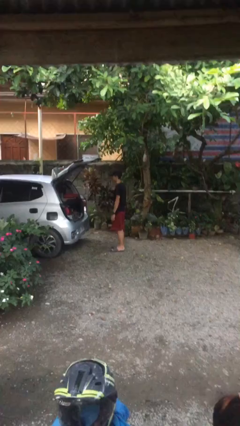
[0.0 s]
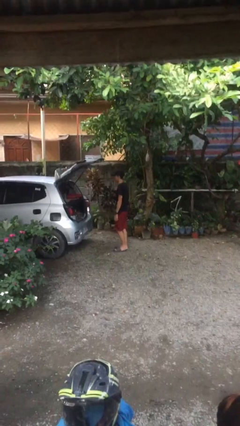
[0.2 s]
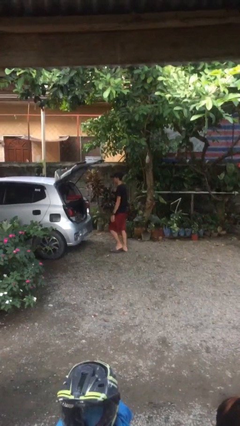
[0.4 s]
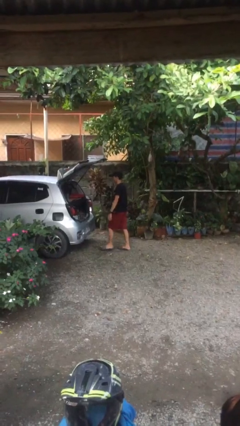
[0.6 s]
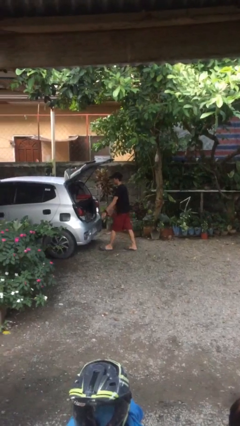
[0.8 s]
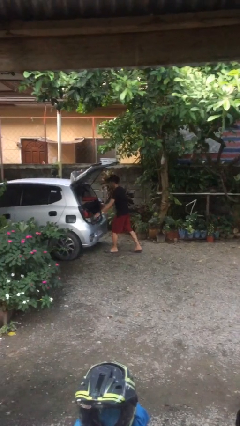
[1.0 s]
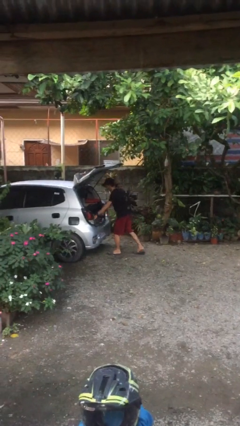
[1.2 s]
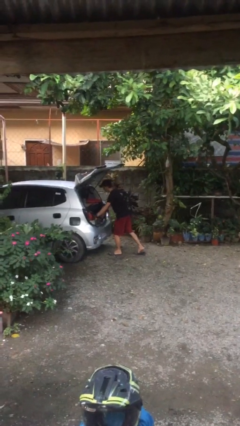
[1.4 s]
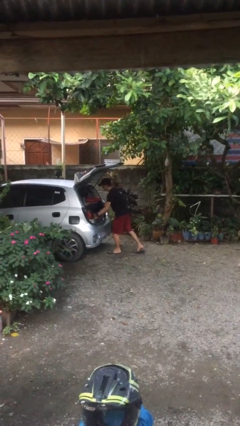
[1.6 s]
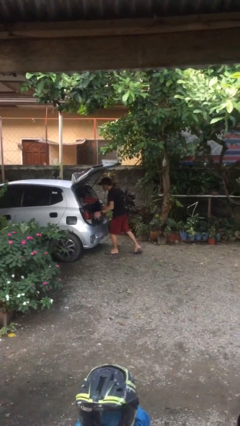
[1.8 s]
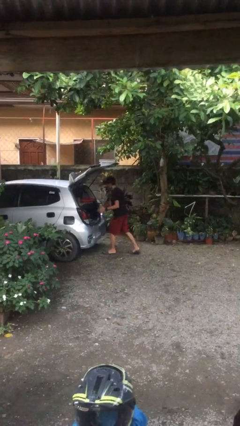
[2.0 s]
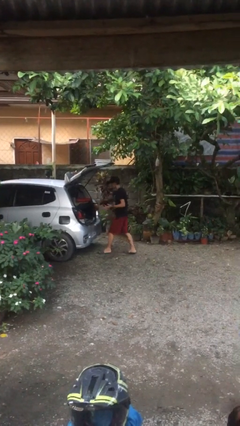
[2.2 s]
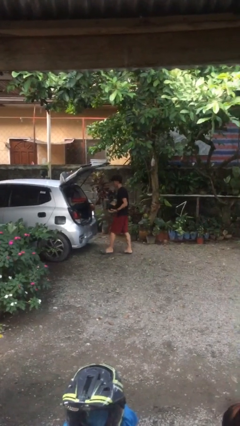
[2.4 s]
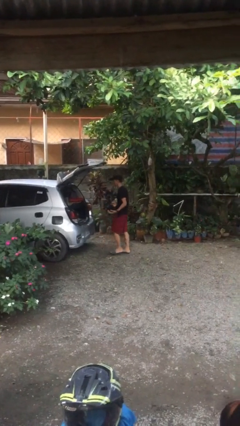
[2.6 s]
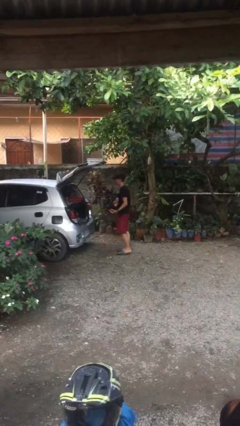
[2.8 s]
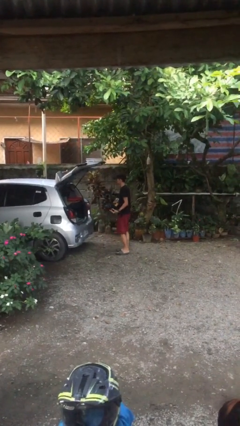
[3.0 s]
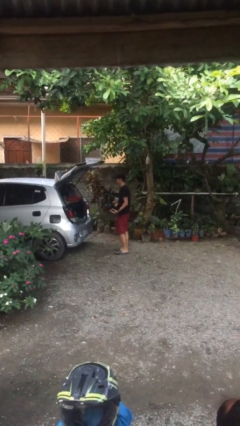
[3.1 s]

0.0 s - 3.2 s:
person unloads car

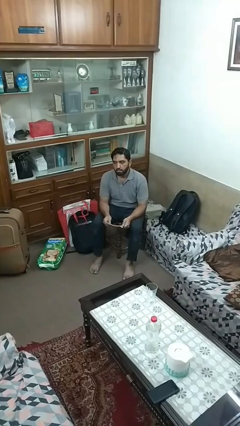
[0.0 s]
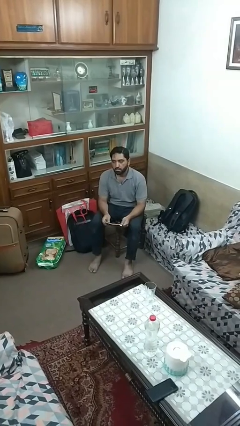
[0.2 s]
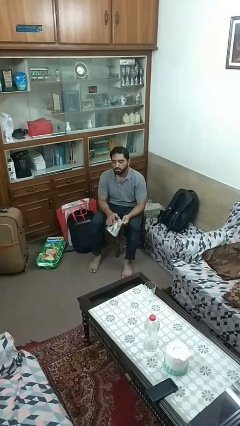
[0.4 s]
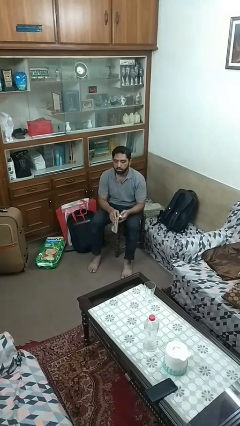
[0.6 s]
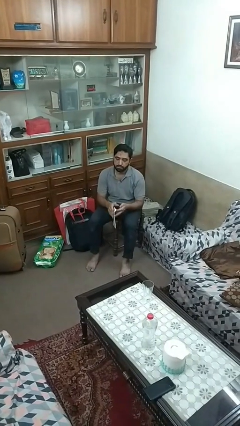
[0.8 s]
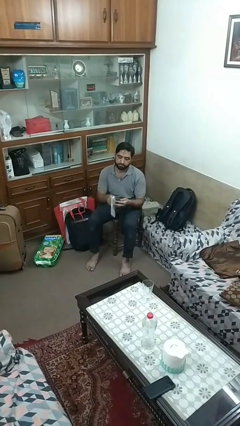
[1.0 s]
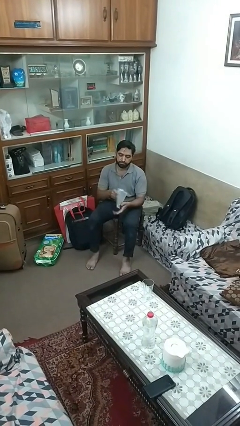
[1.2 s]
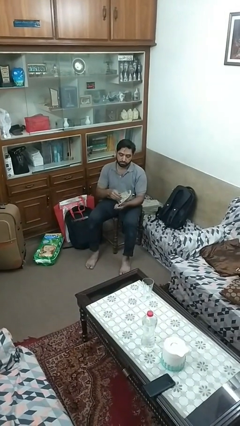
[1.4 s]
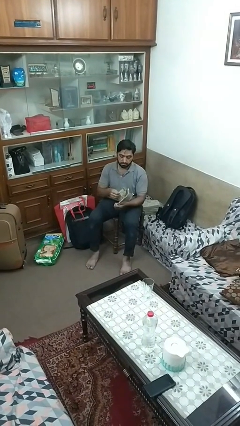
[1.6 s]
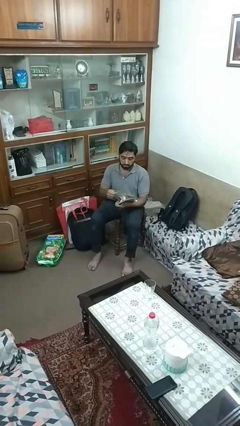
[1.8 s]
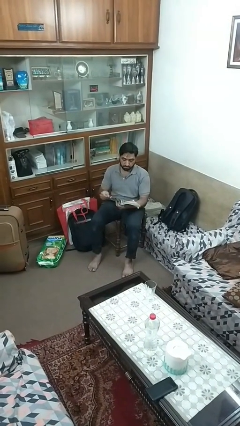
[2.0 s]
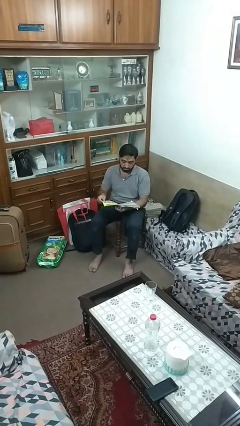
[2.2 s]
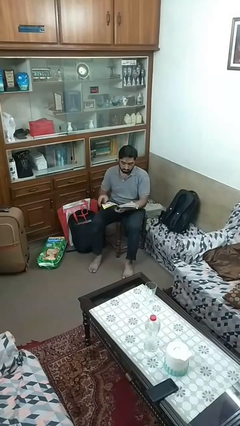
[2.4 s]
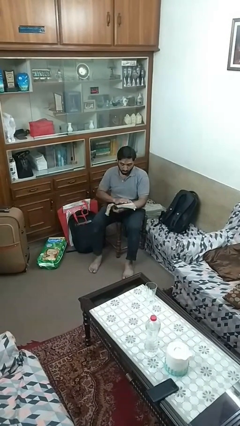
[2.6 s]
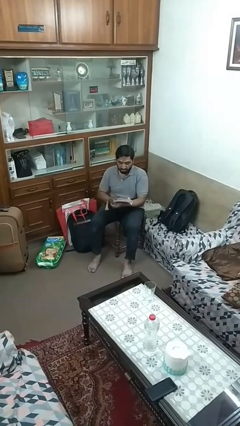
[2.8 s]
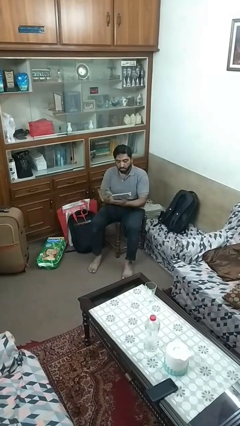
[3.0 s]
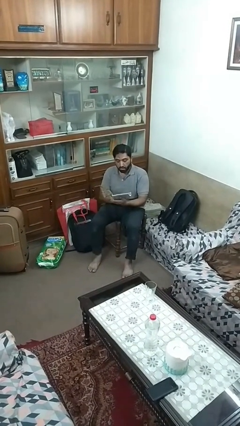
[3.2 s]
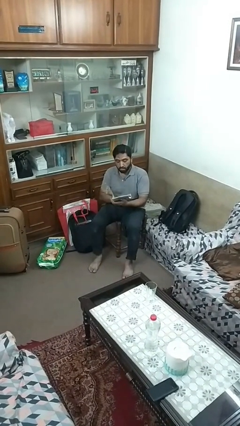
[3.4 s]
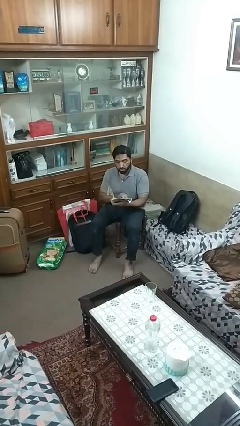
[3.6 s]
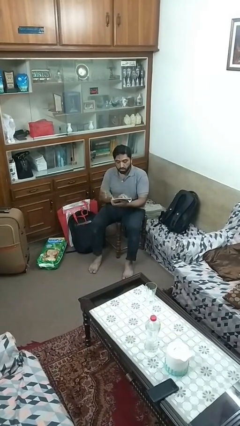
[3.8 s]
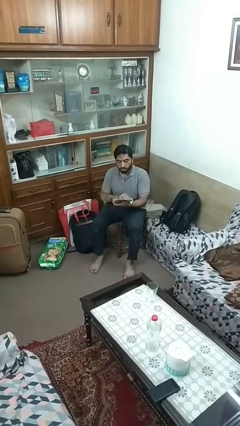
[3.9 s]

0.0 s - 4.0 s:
person reads magazine

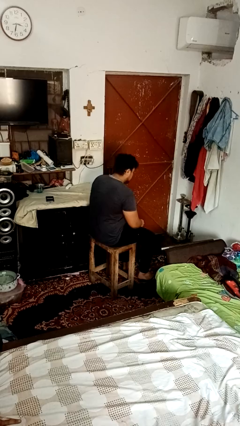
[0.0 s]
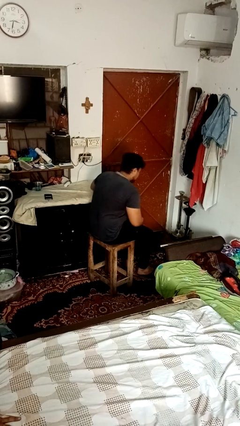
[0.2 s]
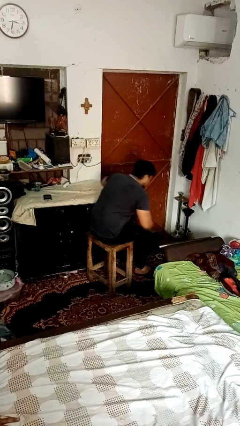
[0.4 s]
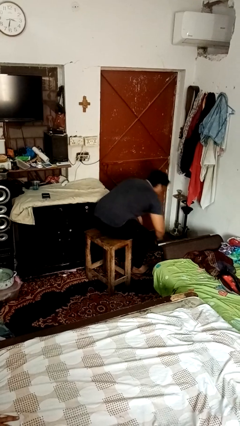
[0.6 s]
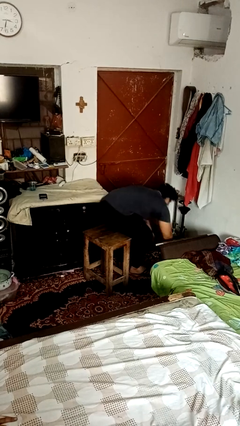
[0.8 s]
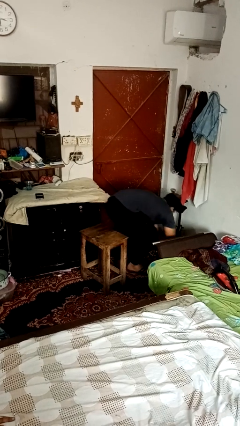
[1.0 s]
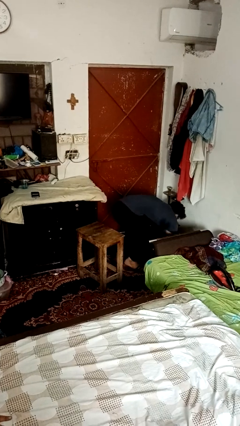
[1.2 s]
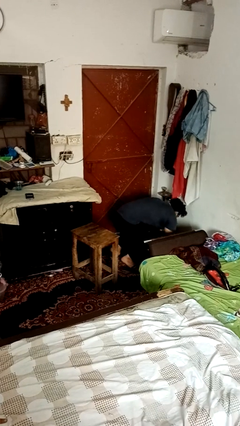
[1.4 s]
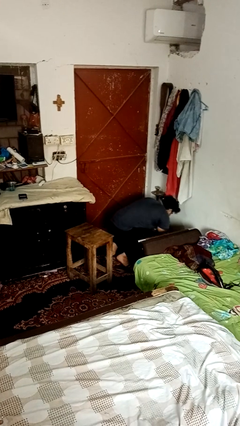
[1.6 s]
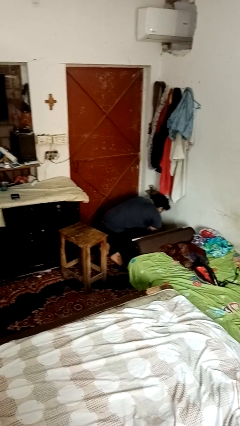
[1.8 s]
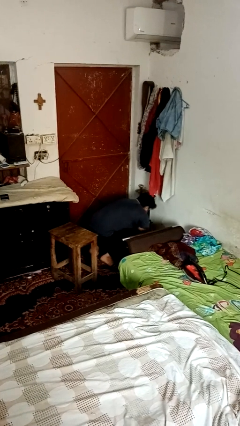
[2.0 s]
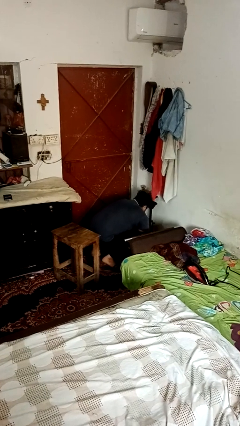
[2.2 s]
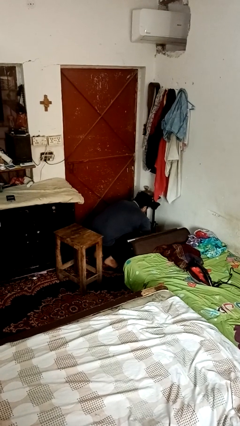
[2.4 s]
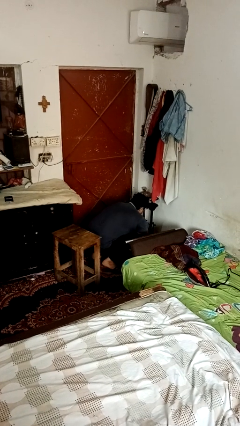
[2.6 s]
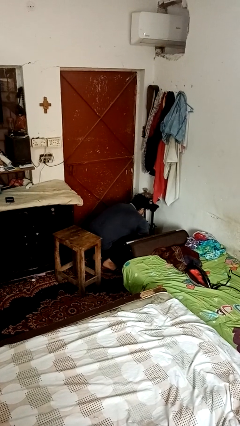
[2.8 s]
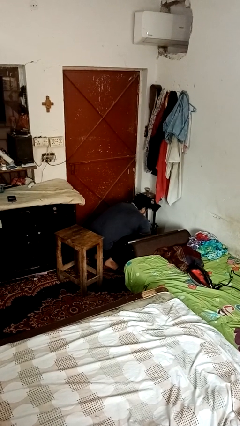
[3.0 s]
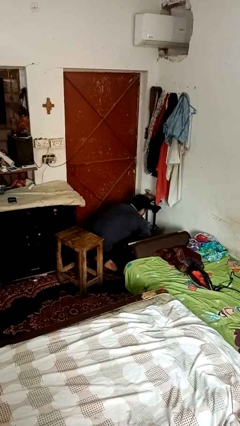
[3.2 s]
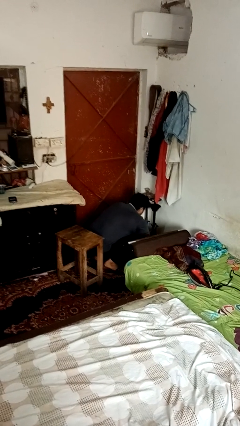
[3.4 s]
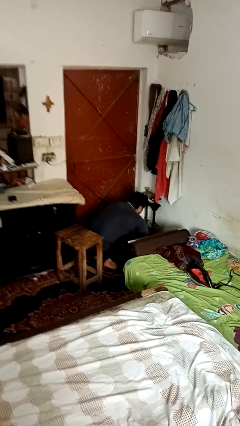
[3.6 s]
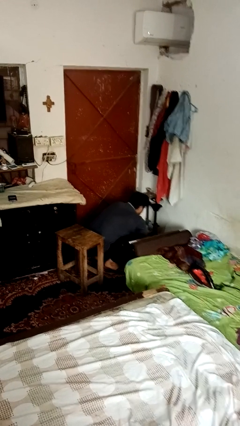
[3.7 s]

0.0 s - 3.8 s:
person falls from chair

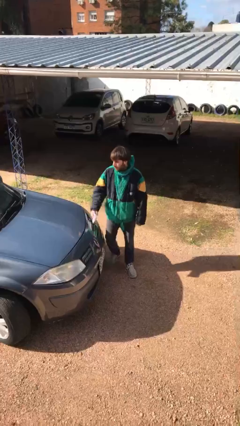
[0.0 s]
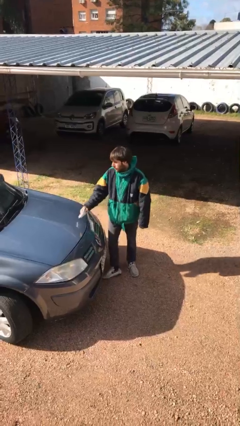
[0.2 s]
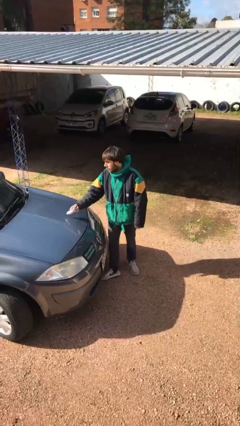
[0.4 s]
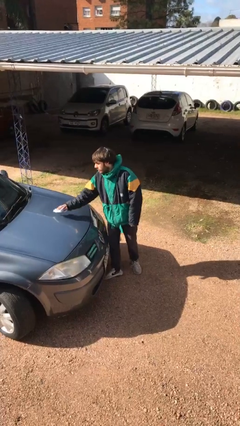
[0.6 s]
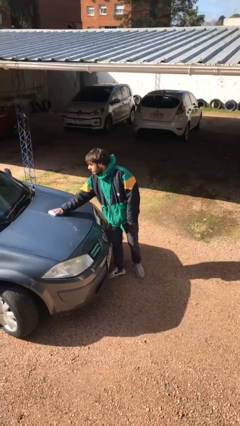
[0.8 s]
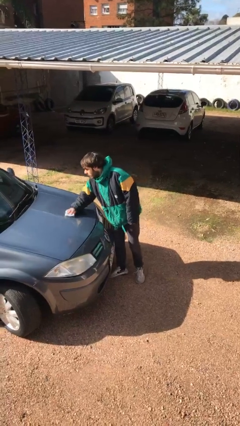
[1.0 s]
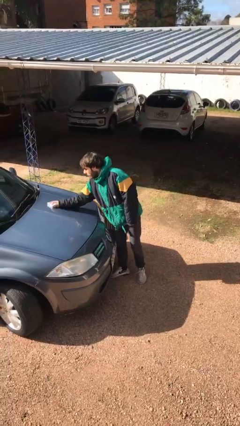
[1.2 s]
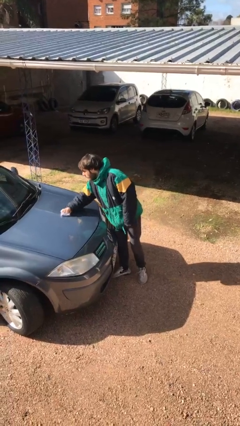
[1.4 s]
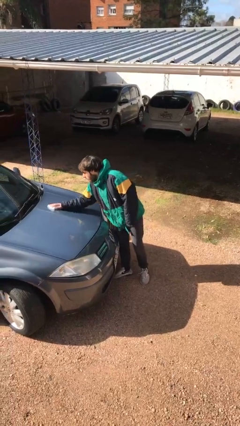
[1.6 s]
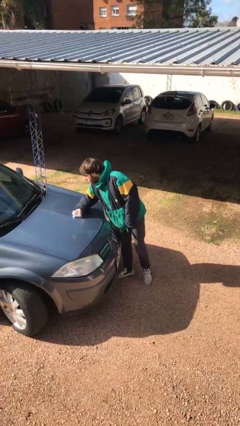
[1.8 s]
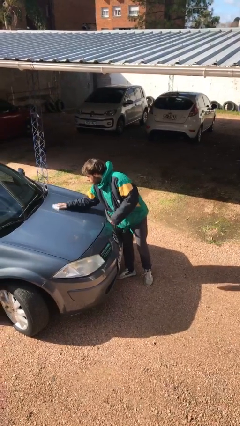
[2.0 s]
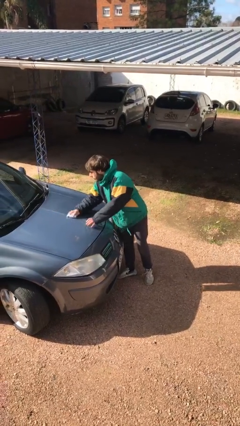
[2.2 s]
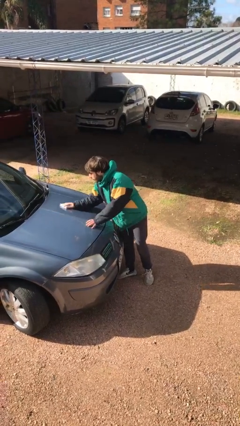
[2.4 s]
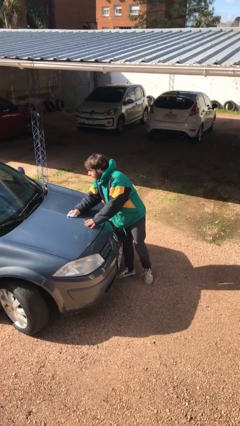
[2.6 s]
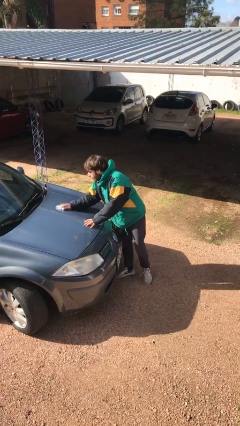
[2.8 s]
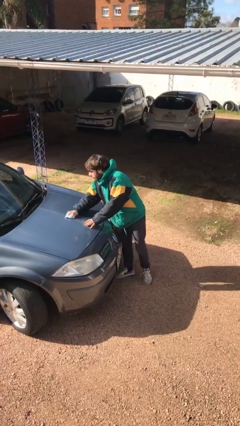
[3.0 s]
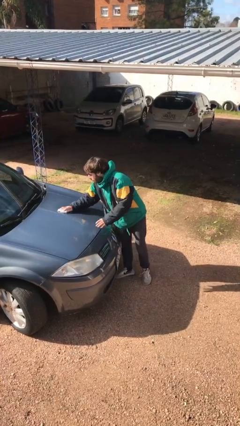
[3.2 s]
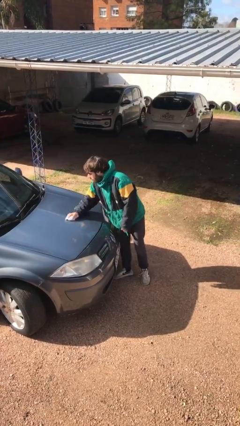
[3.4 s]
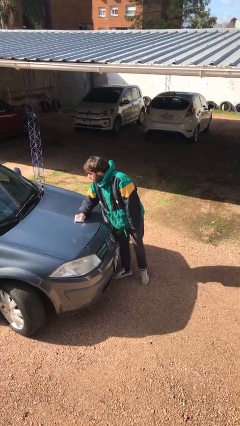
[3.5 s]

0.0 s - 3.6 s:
person polishes car with rag

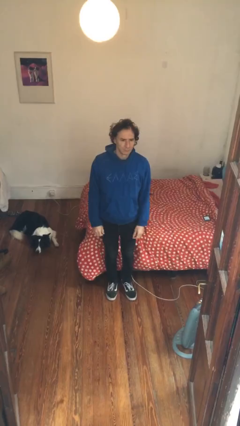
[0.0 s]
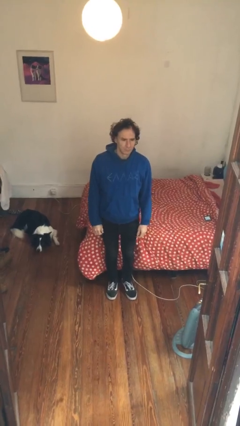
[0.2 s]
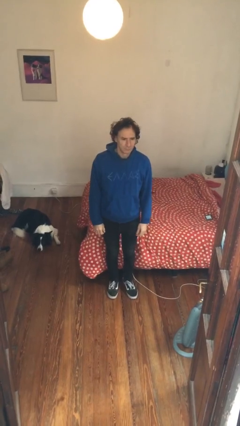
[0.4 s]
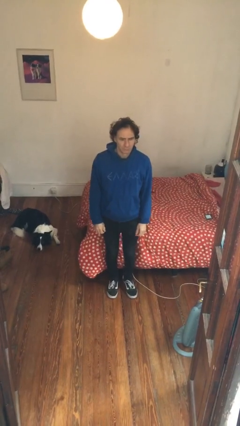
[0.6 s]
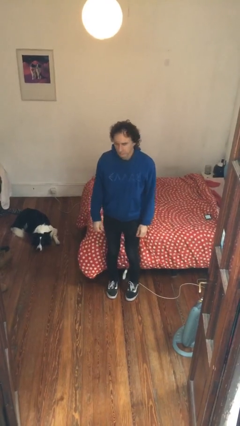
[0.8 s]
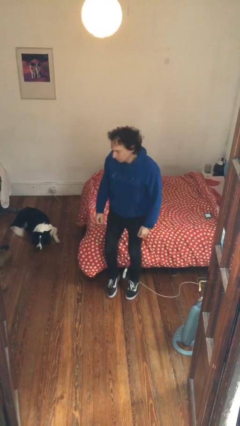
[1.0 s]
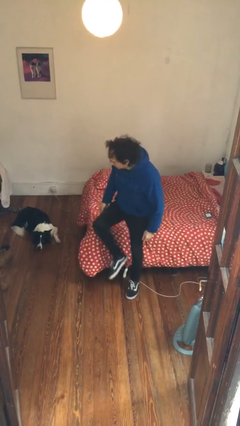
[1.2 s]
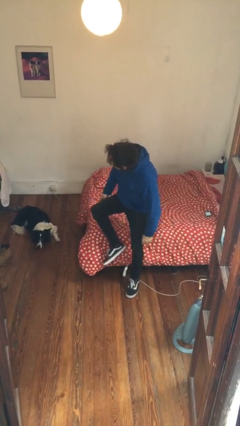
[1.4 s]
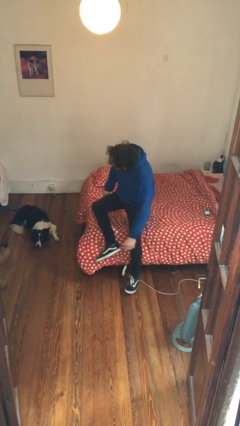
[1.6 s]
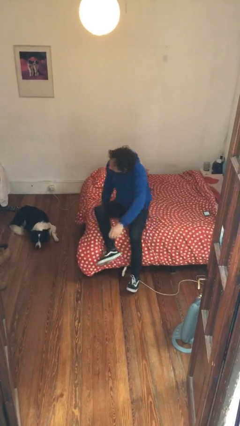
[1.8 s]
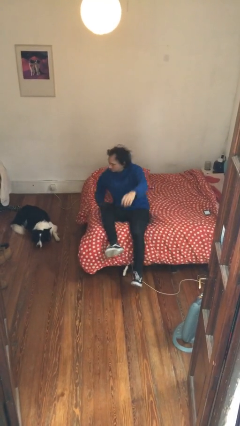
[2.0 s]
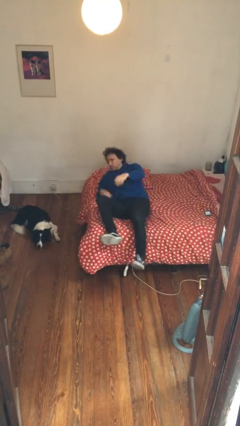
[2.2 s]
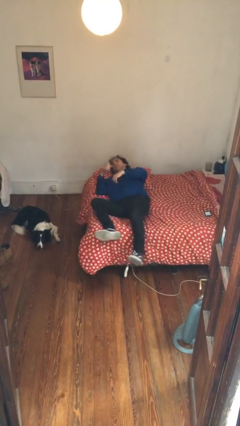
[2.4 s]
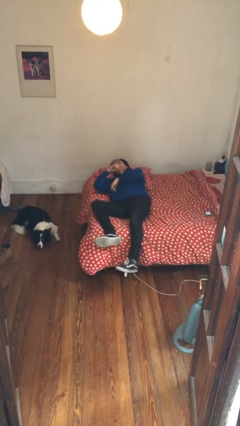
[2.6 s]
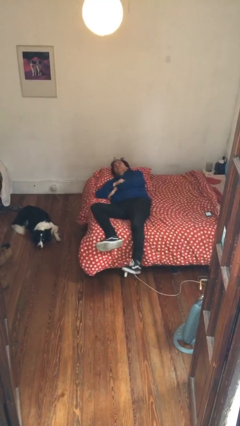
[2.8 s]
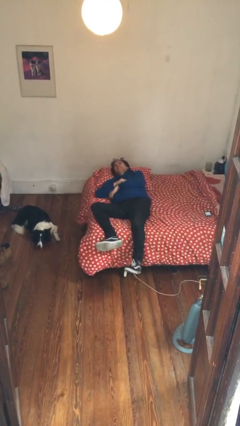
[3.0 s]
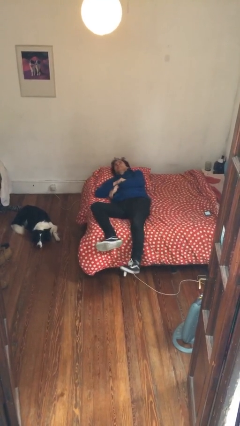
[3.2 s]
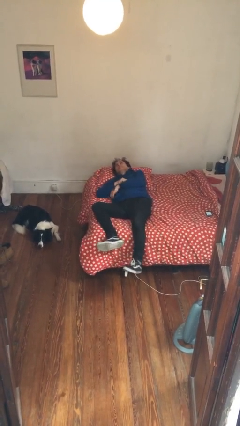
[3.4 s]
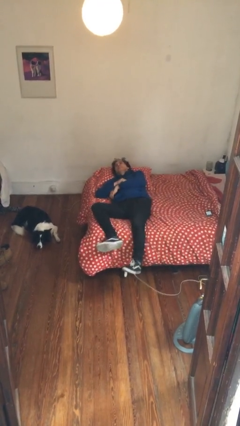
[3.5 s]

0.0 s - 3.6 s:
person lies down on bed
